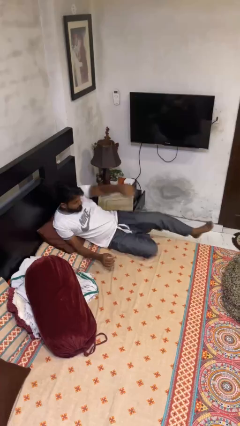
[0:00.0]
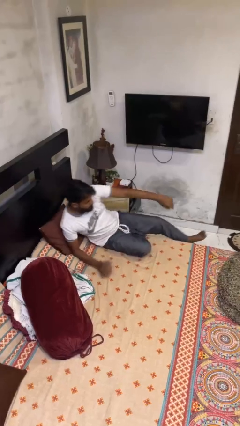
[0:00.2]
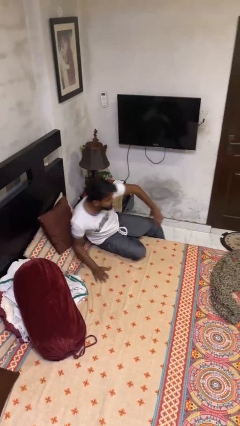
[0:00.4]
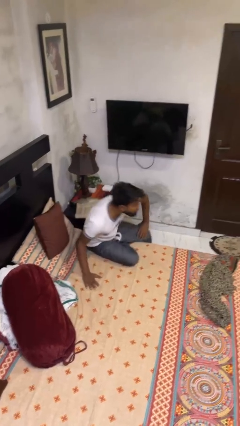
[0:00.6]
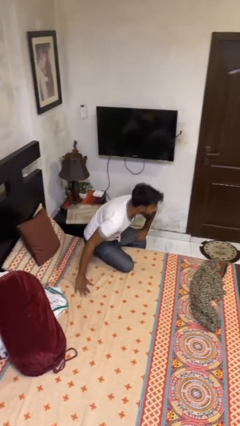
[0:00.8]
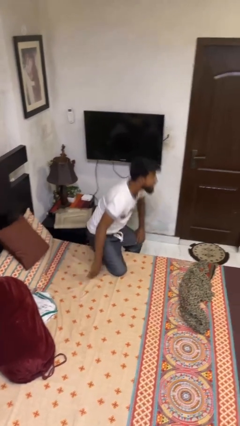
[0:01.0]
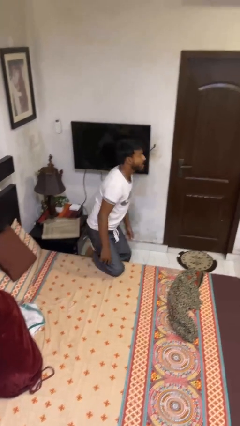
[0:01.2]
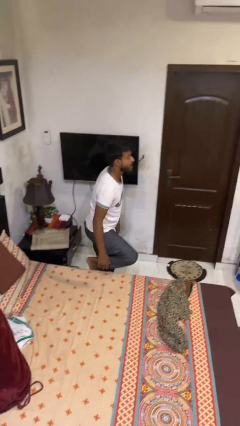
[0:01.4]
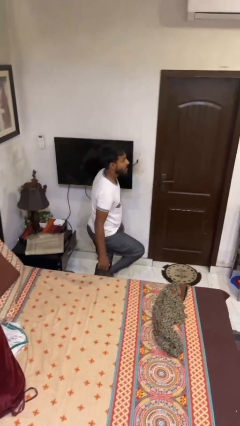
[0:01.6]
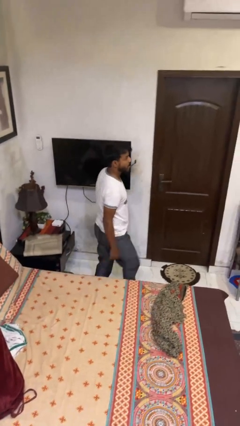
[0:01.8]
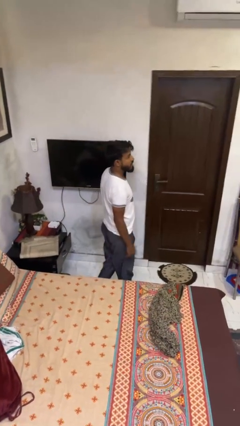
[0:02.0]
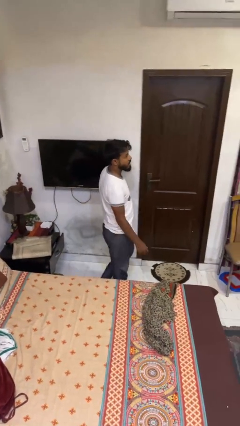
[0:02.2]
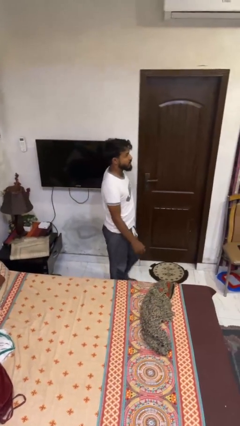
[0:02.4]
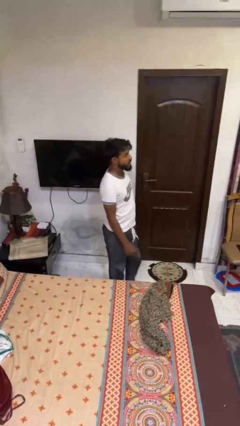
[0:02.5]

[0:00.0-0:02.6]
person stands up

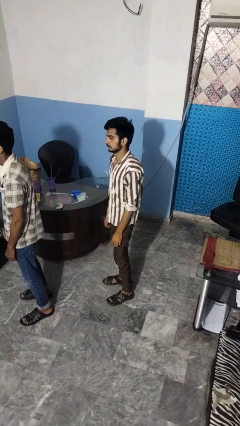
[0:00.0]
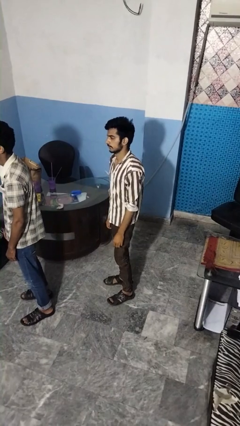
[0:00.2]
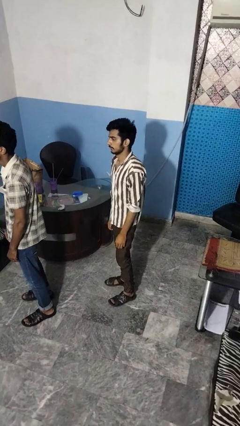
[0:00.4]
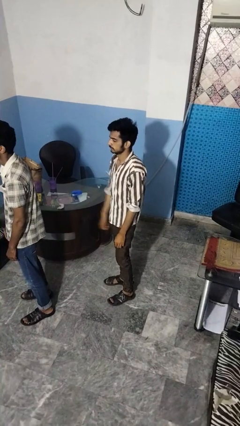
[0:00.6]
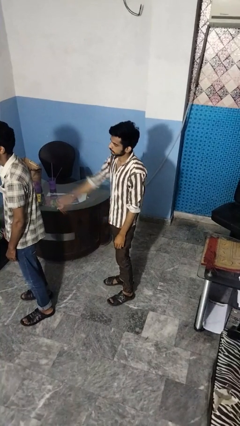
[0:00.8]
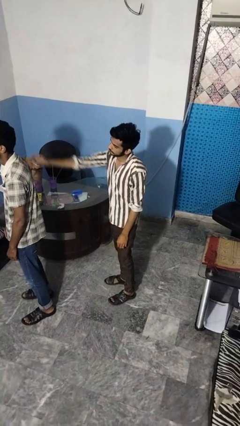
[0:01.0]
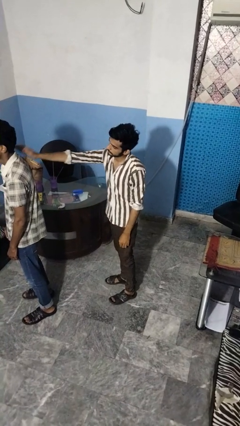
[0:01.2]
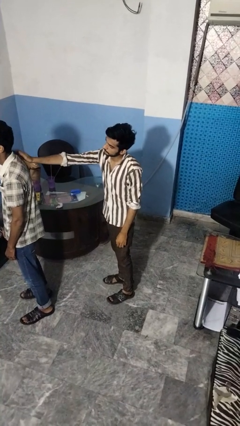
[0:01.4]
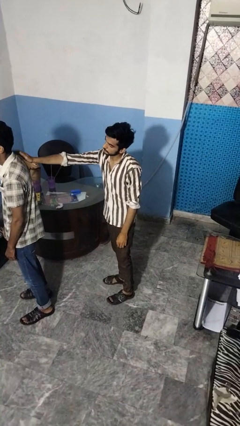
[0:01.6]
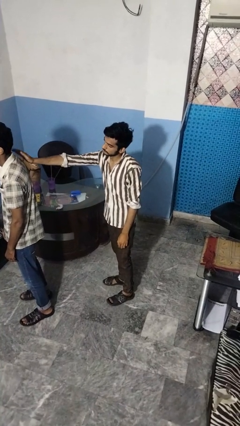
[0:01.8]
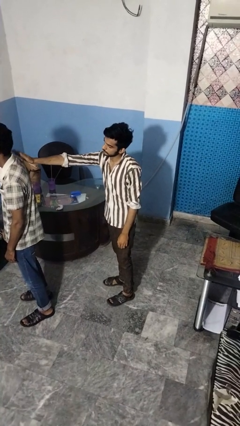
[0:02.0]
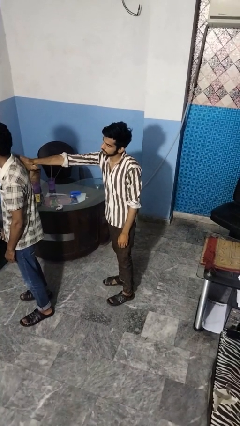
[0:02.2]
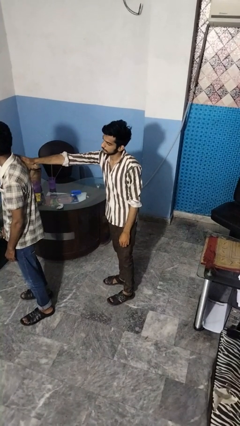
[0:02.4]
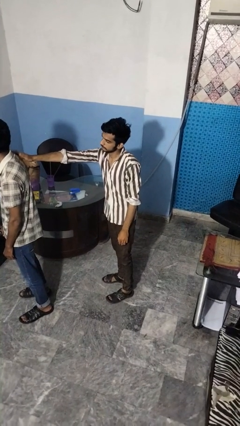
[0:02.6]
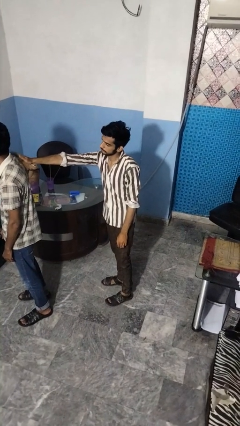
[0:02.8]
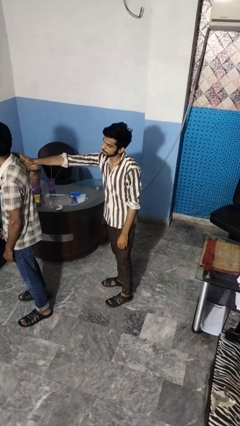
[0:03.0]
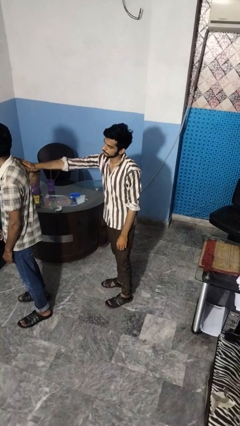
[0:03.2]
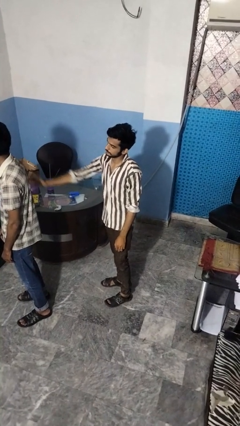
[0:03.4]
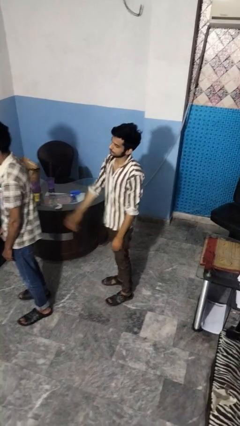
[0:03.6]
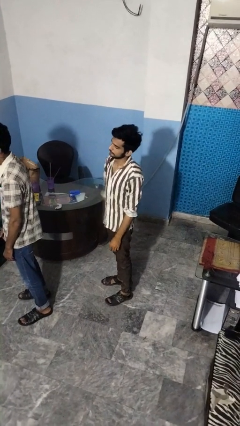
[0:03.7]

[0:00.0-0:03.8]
person touches back of person

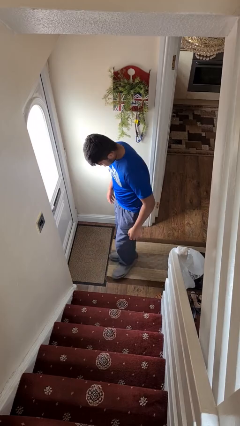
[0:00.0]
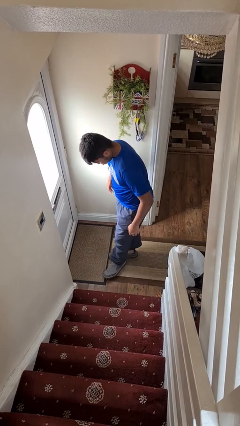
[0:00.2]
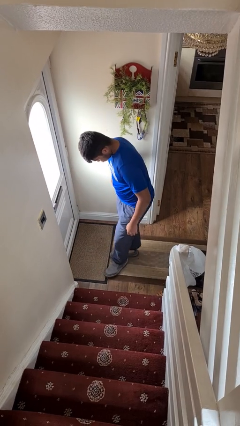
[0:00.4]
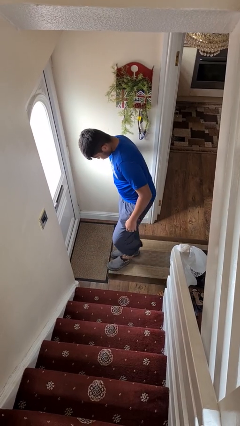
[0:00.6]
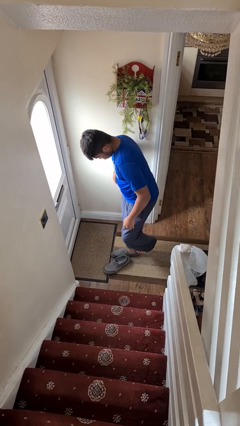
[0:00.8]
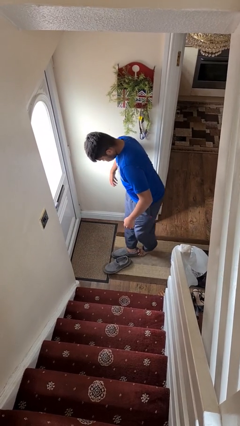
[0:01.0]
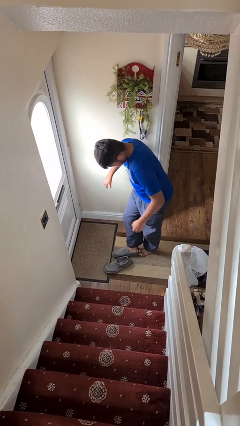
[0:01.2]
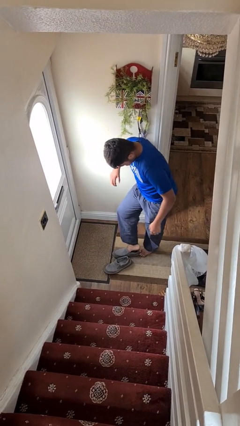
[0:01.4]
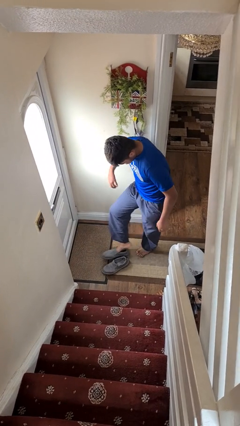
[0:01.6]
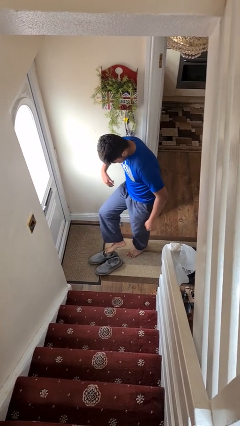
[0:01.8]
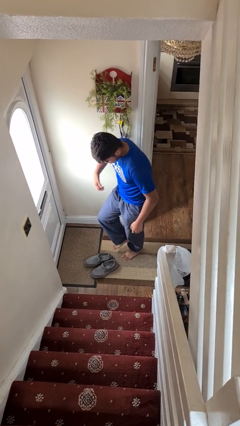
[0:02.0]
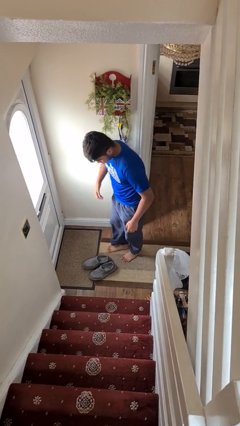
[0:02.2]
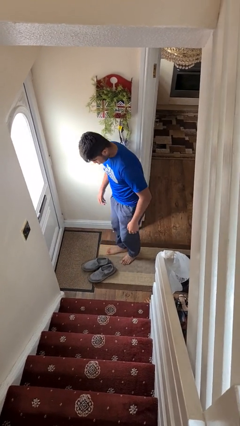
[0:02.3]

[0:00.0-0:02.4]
person takes off shoes

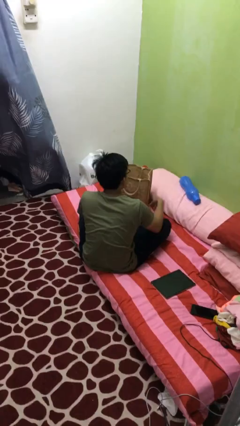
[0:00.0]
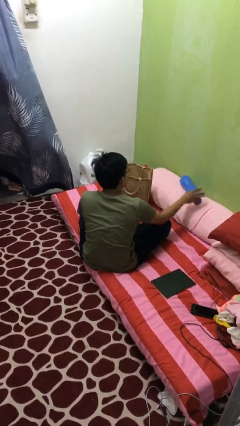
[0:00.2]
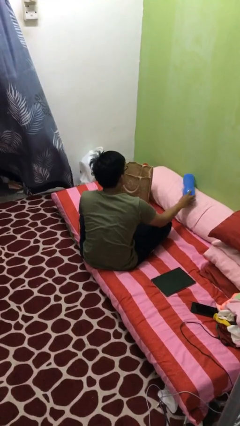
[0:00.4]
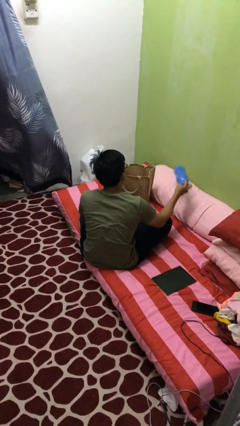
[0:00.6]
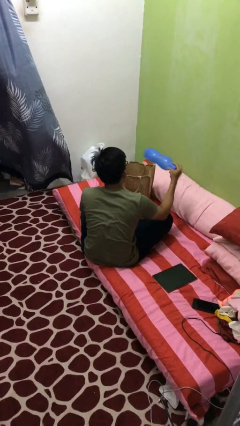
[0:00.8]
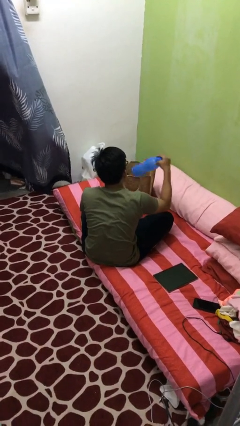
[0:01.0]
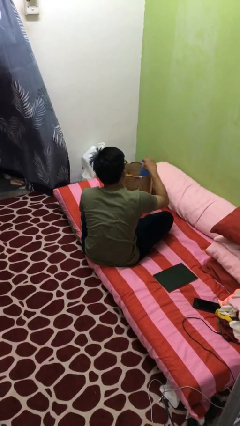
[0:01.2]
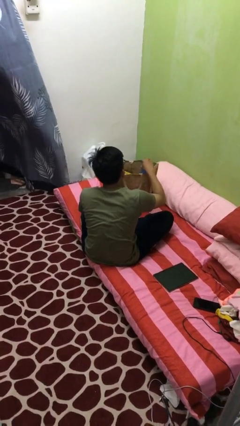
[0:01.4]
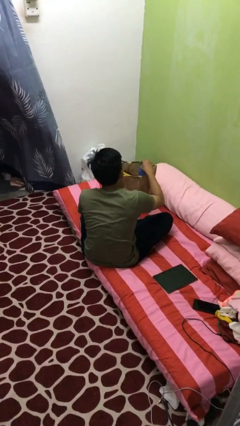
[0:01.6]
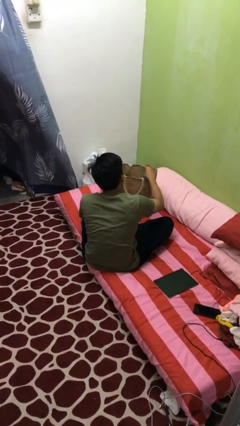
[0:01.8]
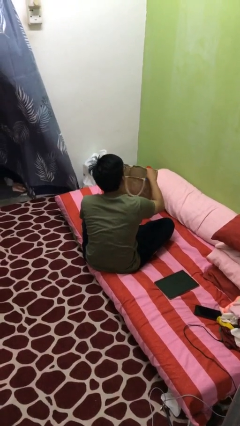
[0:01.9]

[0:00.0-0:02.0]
person puts object into bag

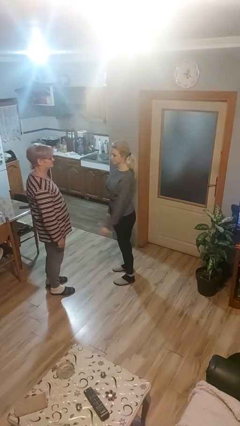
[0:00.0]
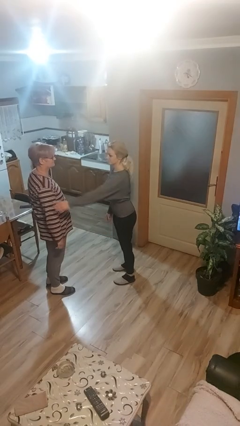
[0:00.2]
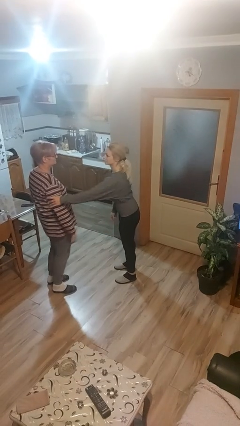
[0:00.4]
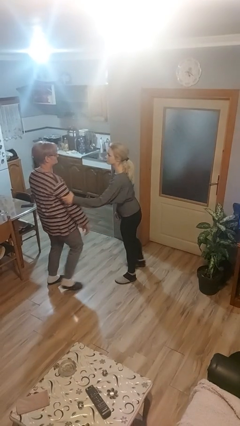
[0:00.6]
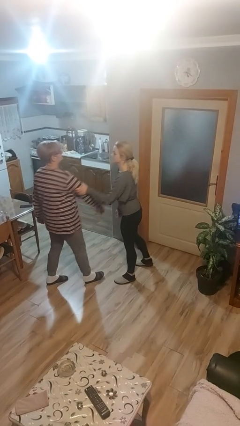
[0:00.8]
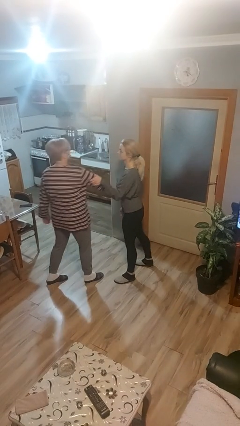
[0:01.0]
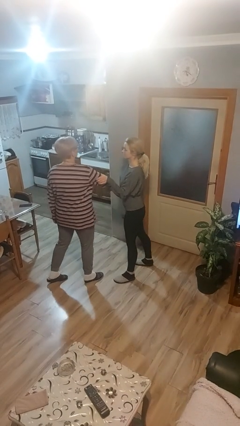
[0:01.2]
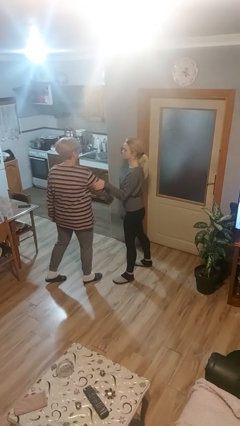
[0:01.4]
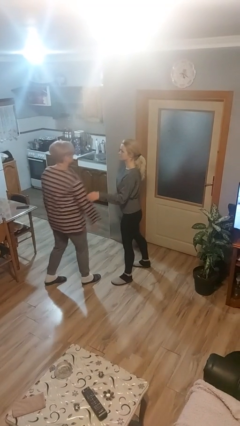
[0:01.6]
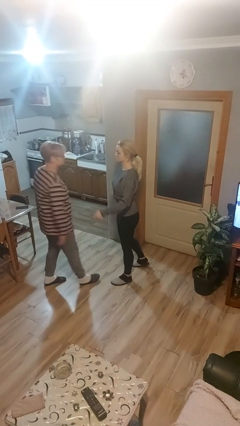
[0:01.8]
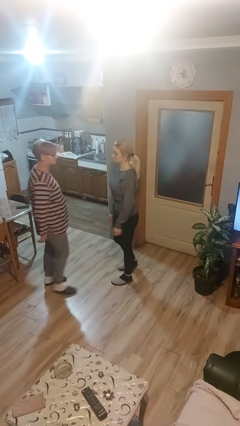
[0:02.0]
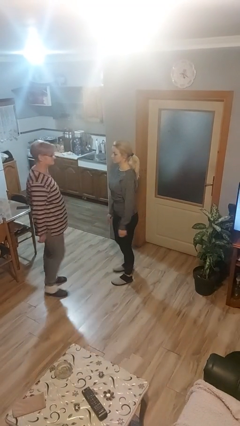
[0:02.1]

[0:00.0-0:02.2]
person grabs person by bicep

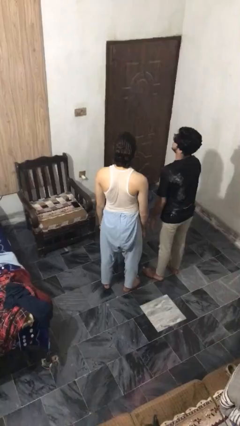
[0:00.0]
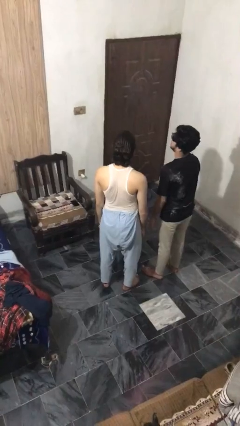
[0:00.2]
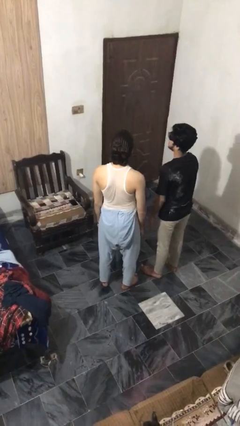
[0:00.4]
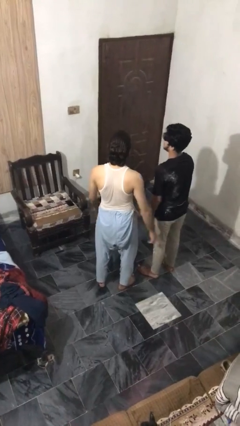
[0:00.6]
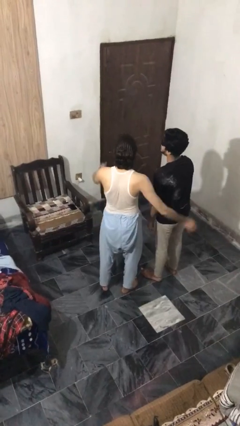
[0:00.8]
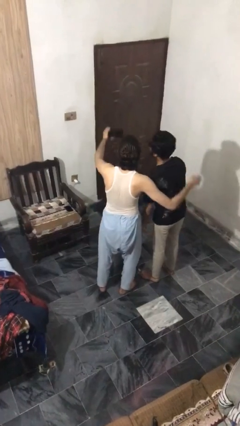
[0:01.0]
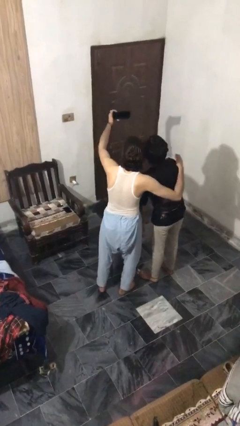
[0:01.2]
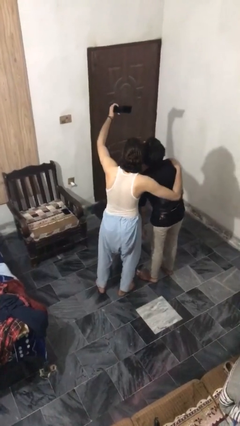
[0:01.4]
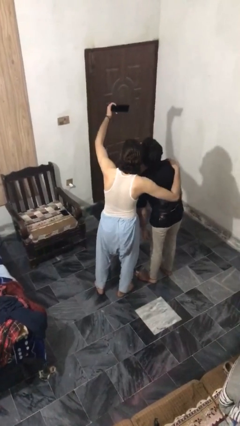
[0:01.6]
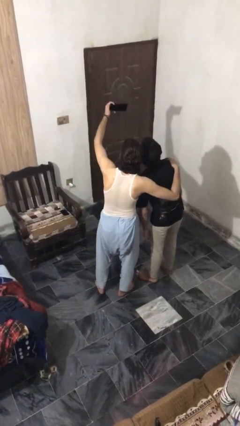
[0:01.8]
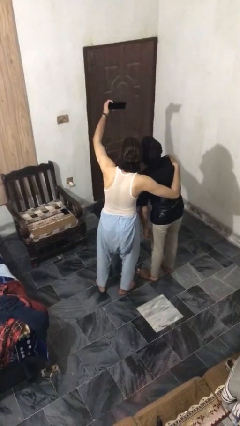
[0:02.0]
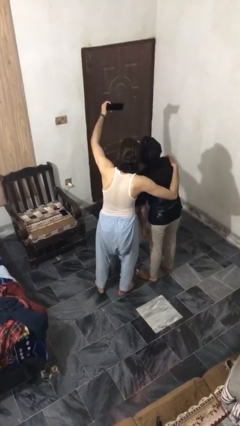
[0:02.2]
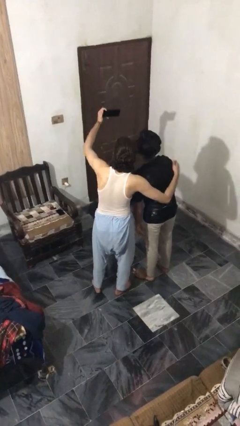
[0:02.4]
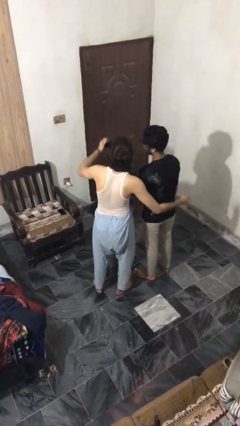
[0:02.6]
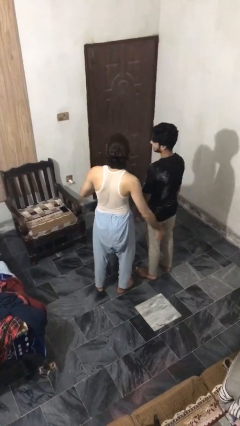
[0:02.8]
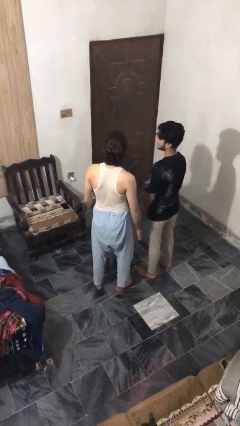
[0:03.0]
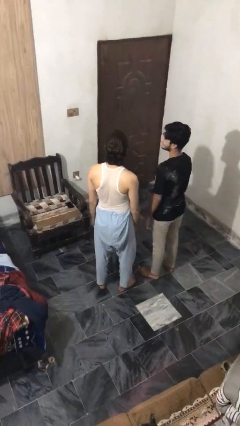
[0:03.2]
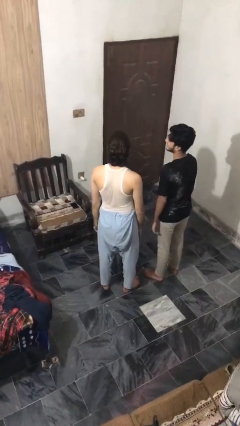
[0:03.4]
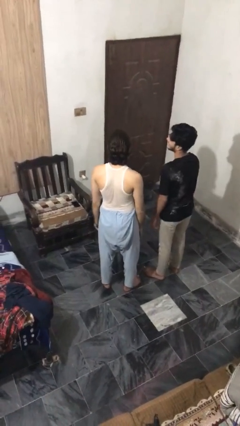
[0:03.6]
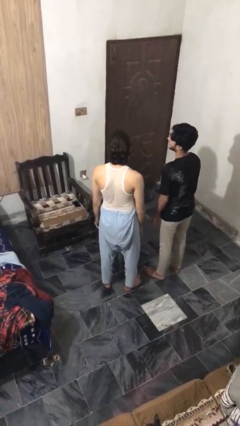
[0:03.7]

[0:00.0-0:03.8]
person takes selfie with person

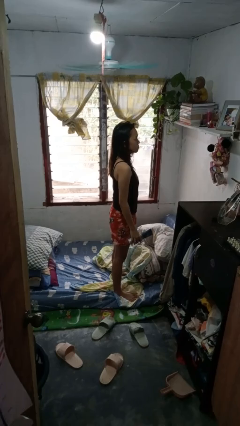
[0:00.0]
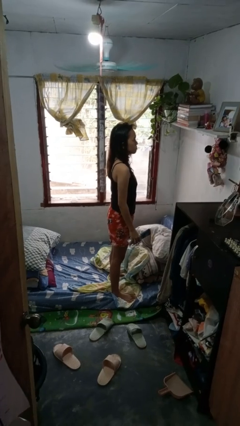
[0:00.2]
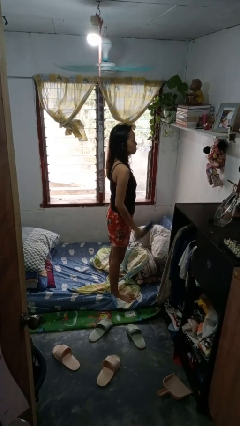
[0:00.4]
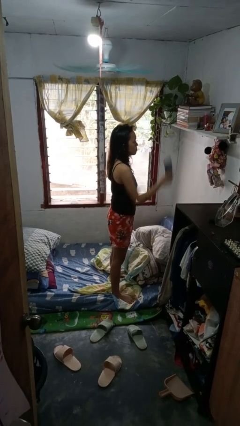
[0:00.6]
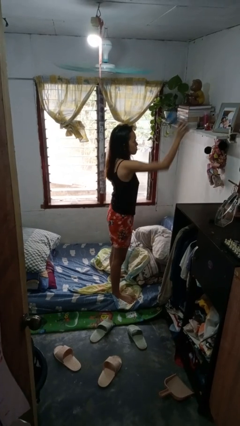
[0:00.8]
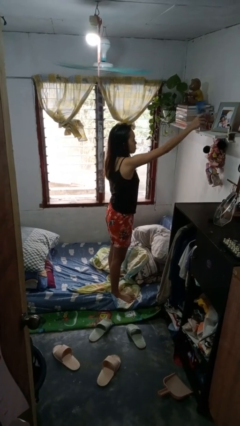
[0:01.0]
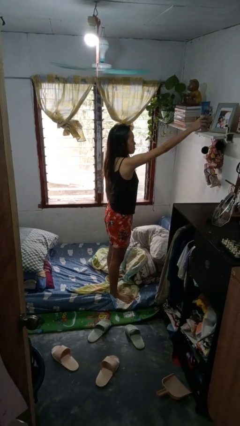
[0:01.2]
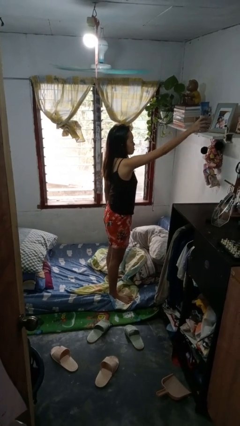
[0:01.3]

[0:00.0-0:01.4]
person puts down object on shelf
